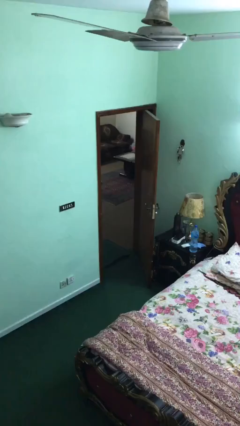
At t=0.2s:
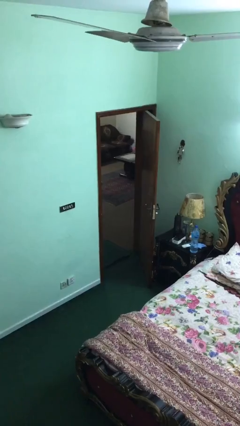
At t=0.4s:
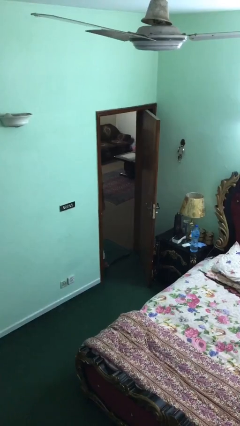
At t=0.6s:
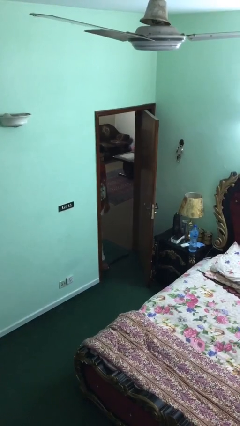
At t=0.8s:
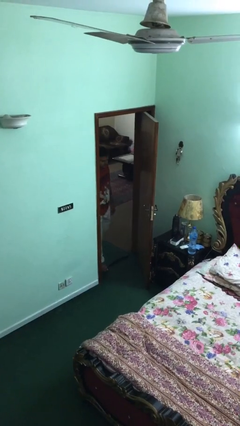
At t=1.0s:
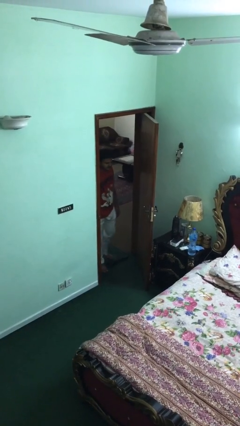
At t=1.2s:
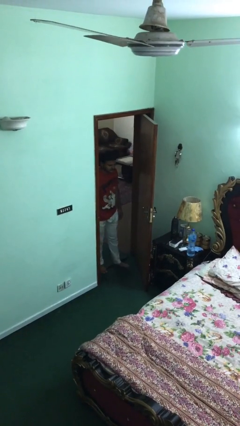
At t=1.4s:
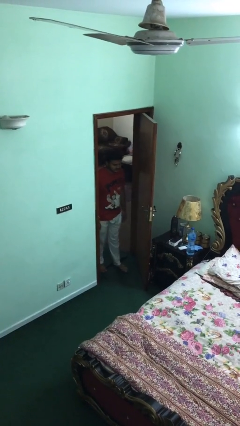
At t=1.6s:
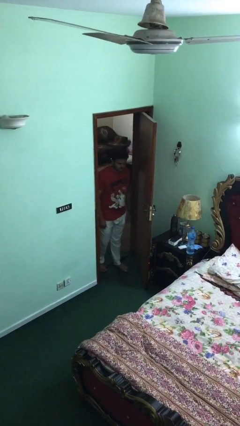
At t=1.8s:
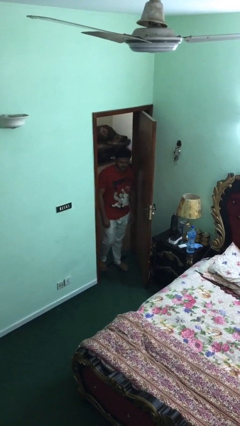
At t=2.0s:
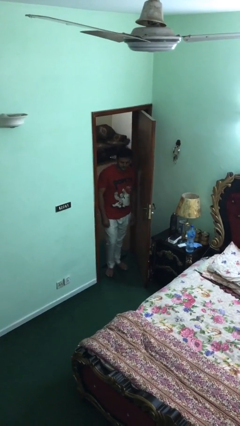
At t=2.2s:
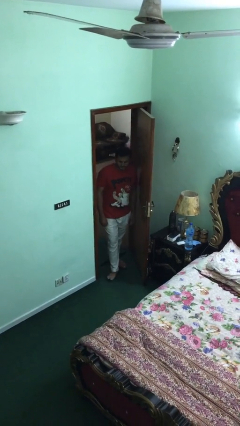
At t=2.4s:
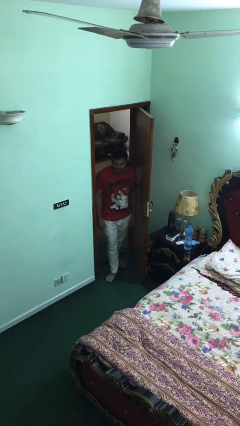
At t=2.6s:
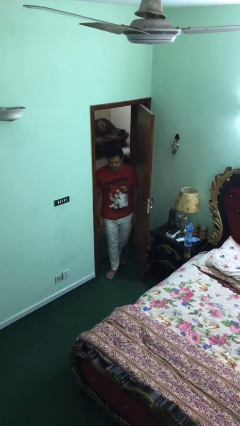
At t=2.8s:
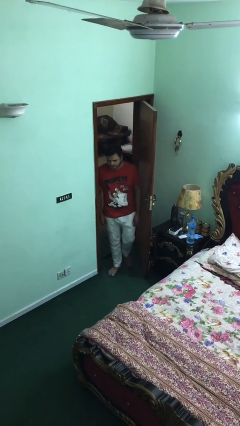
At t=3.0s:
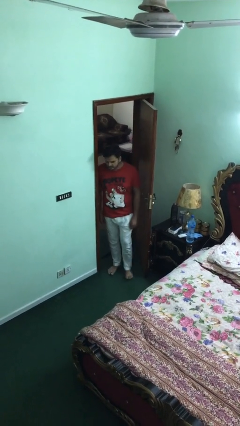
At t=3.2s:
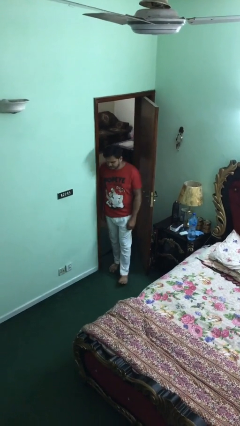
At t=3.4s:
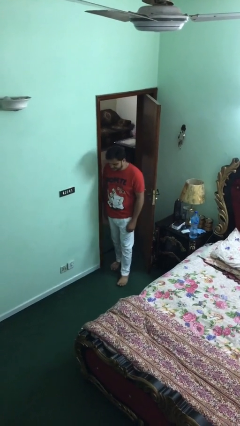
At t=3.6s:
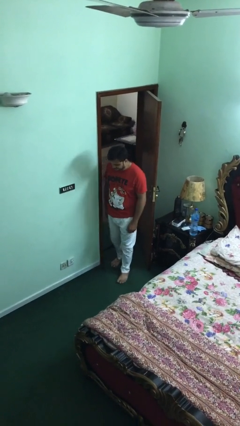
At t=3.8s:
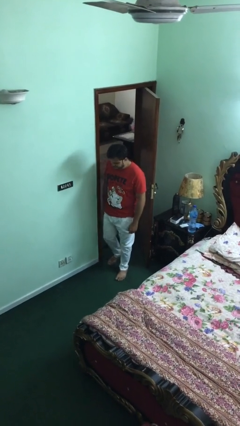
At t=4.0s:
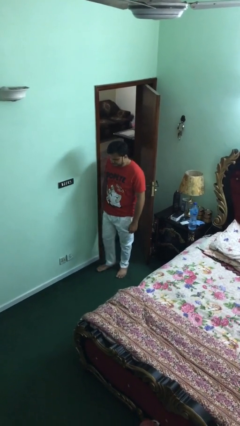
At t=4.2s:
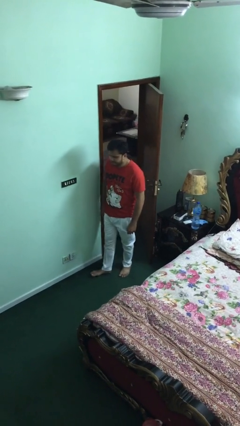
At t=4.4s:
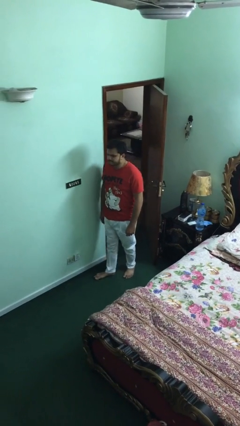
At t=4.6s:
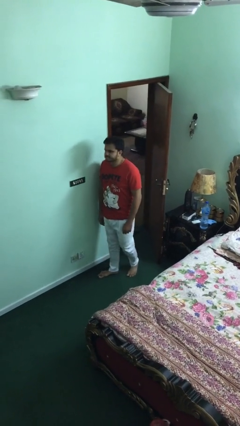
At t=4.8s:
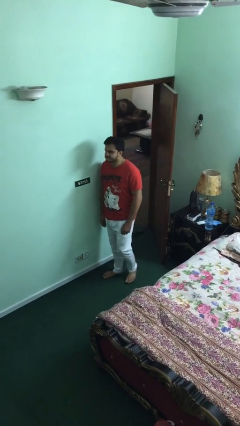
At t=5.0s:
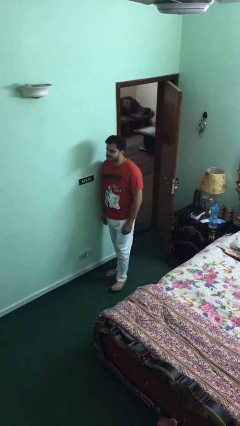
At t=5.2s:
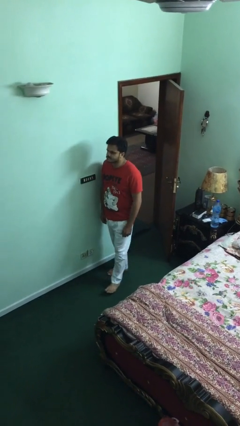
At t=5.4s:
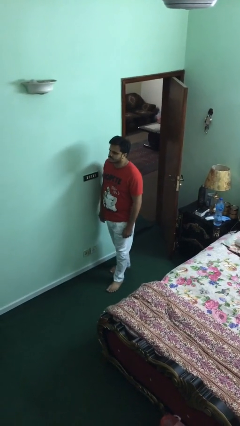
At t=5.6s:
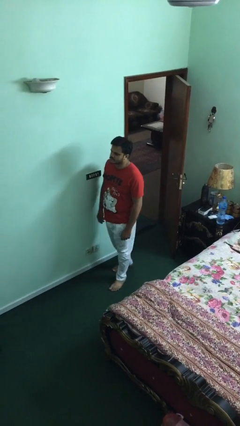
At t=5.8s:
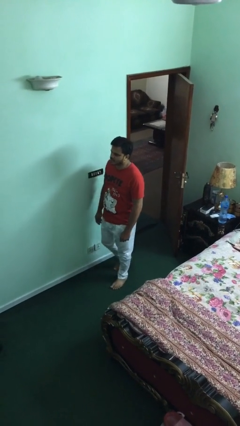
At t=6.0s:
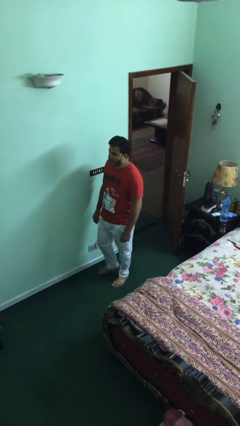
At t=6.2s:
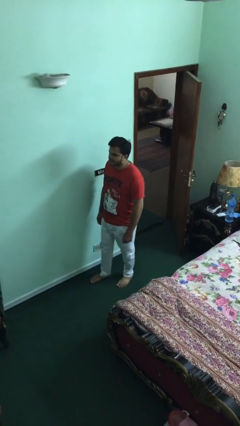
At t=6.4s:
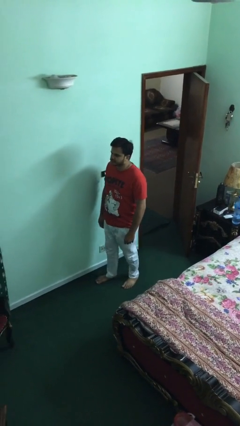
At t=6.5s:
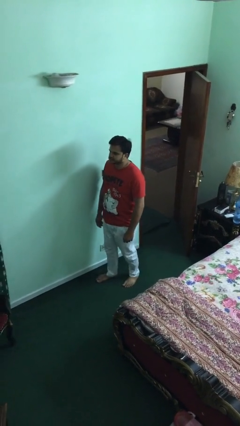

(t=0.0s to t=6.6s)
person enters scene through structure

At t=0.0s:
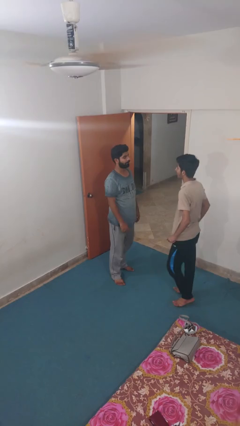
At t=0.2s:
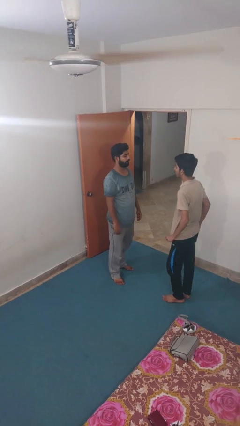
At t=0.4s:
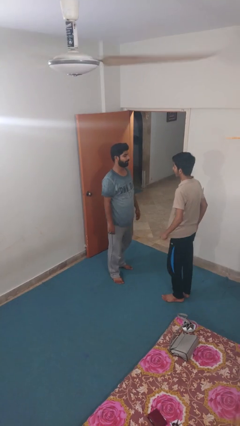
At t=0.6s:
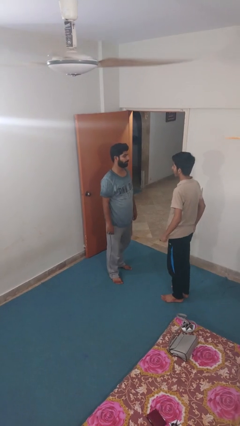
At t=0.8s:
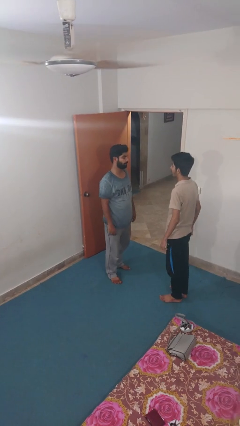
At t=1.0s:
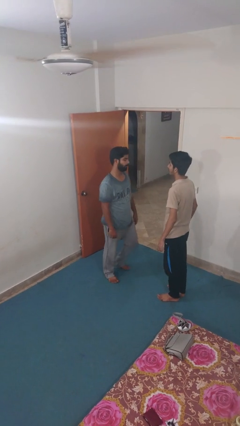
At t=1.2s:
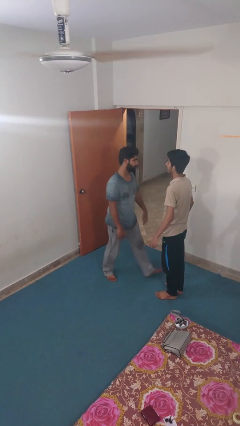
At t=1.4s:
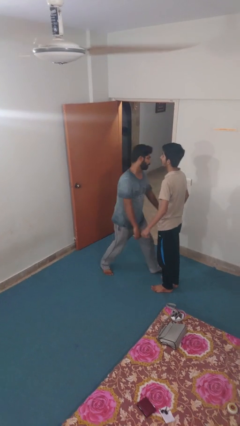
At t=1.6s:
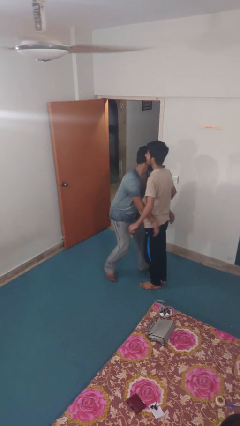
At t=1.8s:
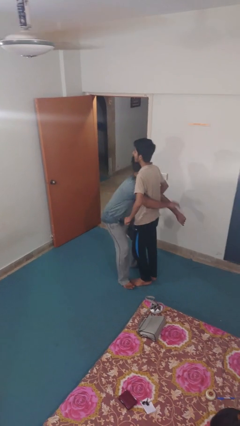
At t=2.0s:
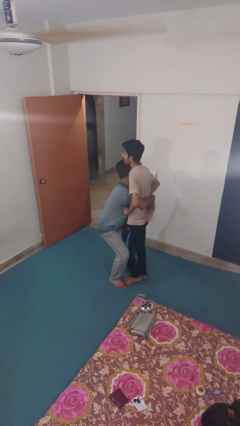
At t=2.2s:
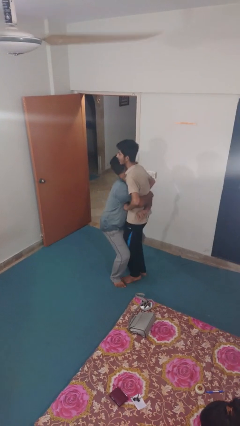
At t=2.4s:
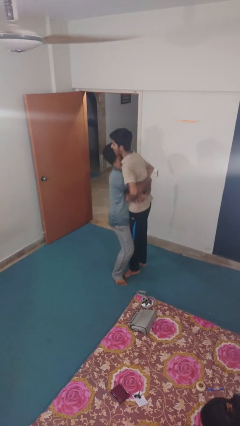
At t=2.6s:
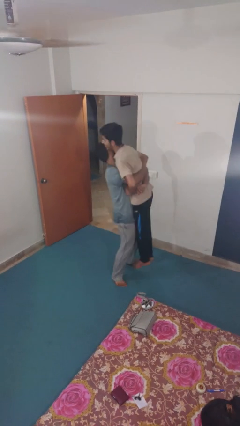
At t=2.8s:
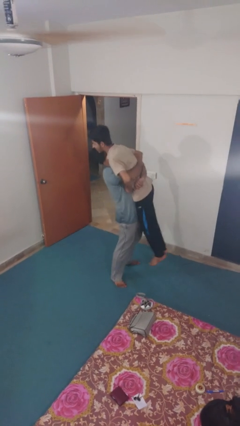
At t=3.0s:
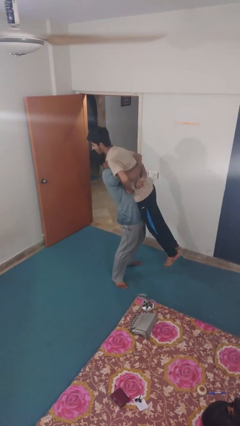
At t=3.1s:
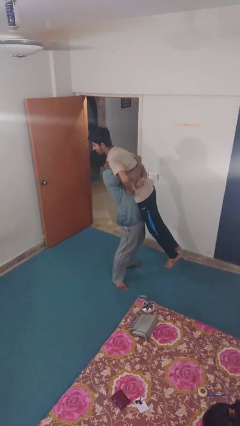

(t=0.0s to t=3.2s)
person picks up person

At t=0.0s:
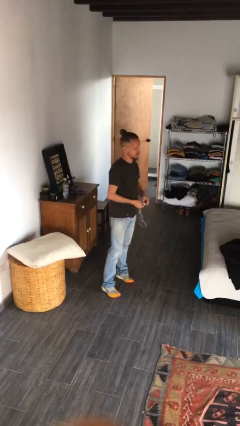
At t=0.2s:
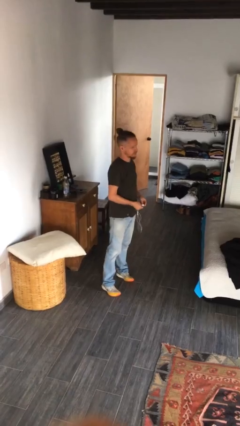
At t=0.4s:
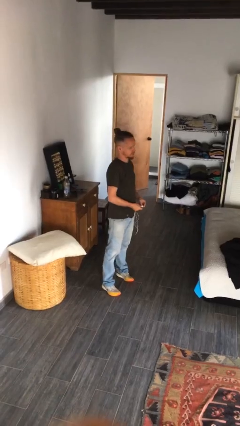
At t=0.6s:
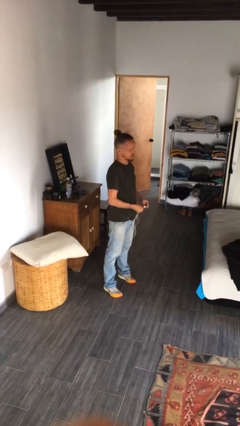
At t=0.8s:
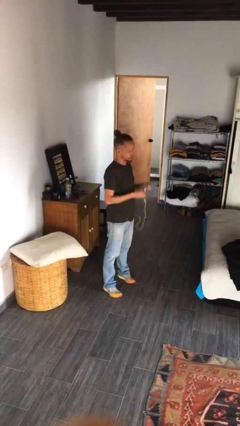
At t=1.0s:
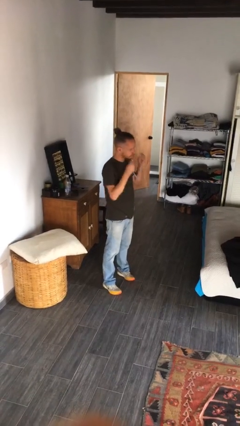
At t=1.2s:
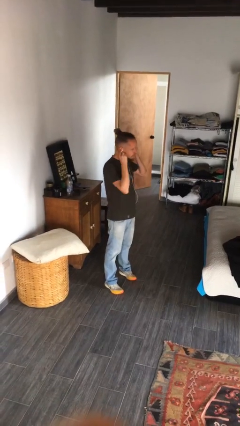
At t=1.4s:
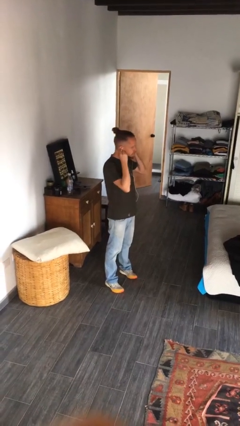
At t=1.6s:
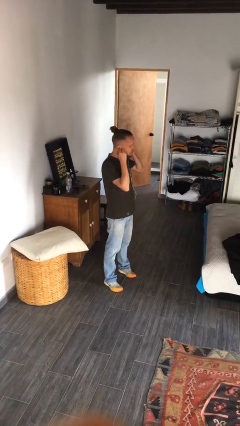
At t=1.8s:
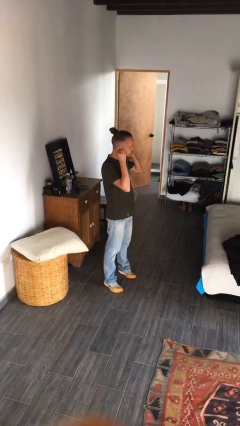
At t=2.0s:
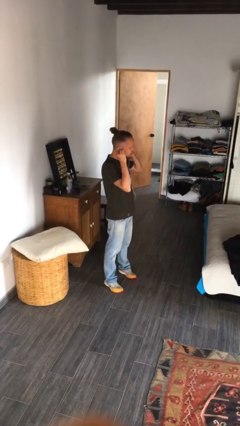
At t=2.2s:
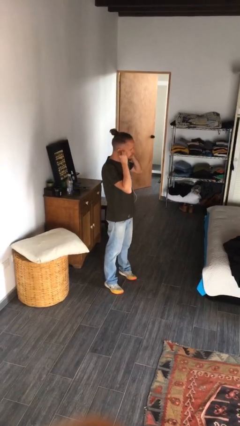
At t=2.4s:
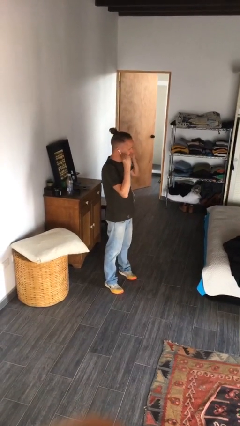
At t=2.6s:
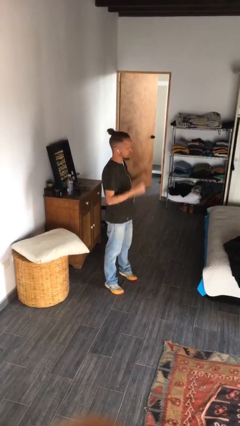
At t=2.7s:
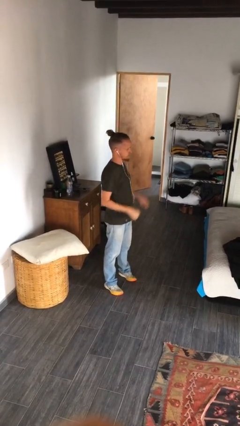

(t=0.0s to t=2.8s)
person puts on headphones

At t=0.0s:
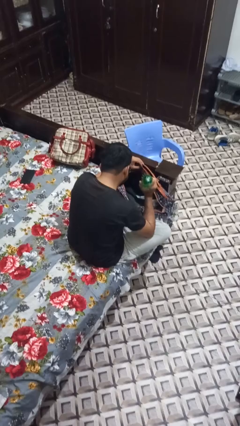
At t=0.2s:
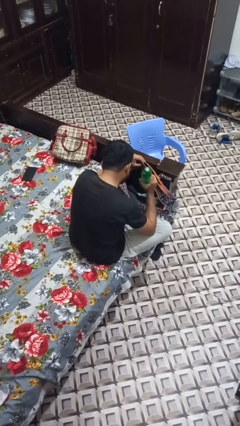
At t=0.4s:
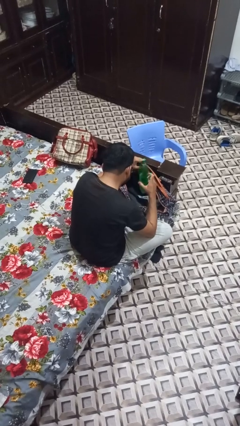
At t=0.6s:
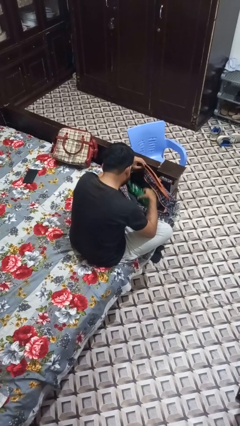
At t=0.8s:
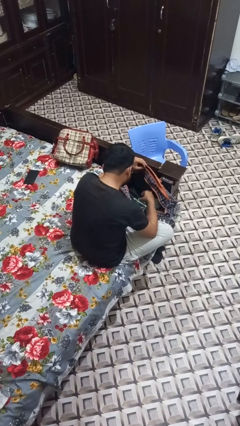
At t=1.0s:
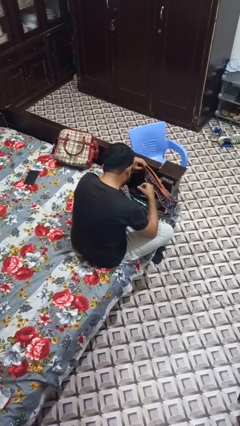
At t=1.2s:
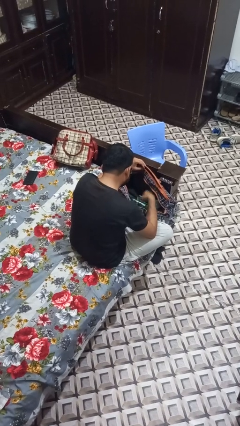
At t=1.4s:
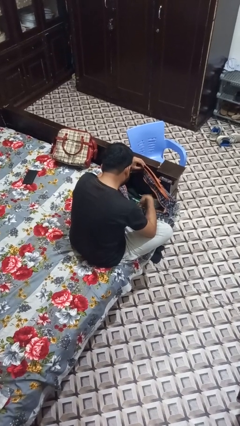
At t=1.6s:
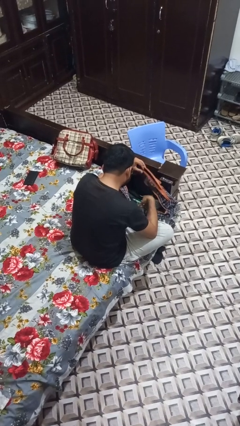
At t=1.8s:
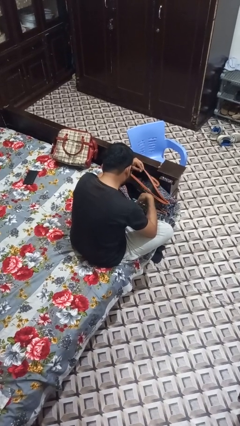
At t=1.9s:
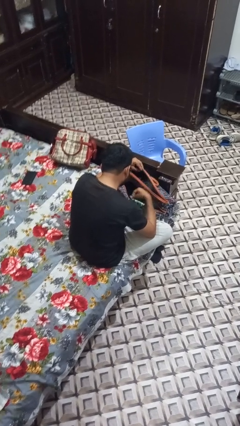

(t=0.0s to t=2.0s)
person puts object into backpack

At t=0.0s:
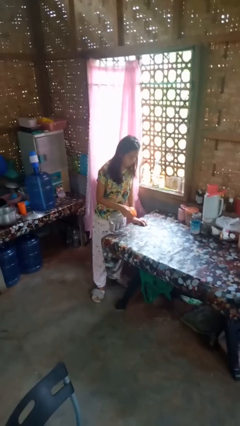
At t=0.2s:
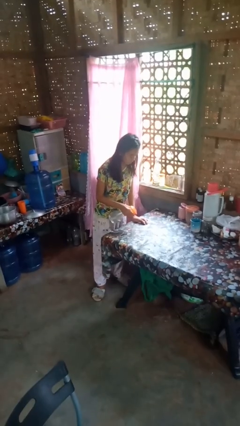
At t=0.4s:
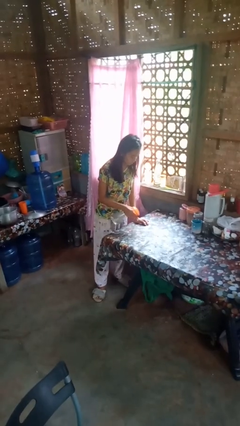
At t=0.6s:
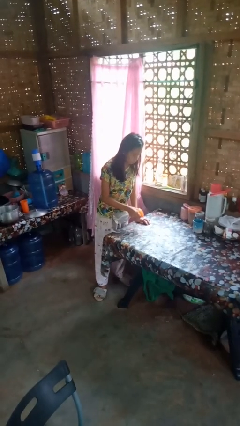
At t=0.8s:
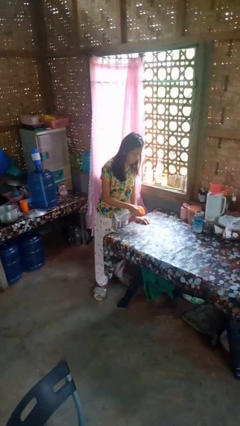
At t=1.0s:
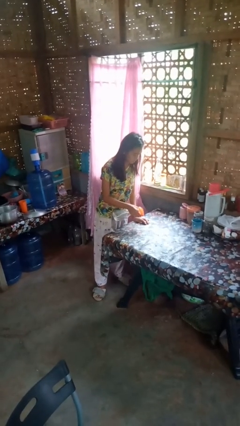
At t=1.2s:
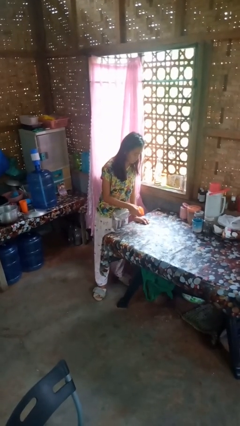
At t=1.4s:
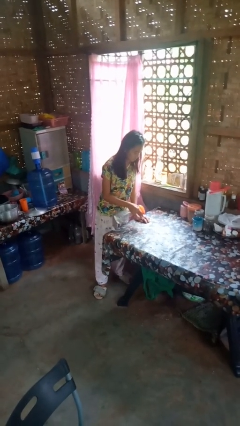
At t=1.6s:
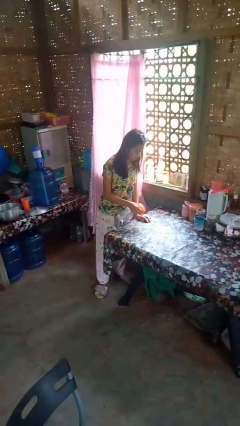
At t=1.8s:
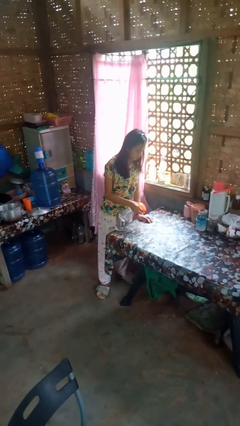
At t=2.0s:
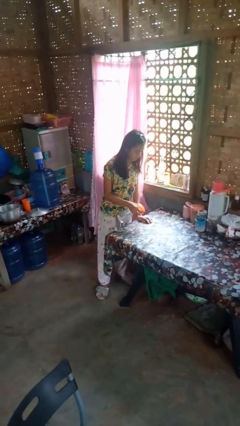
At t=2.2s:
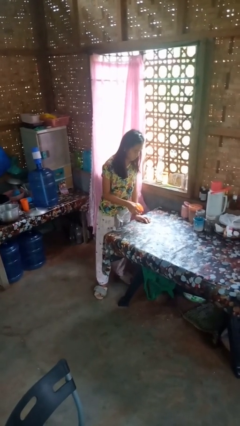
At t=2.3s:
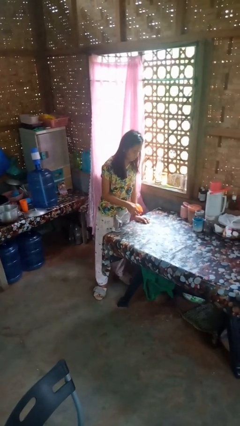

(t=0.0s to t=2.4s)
person sprays from bottle
